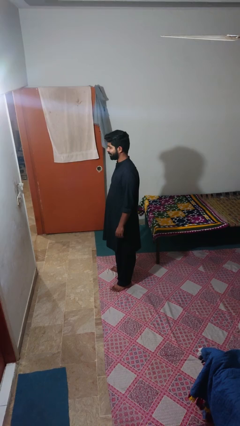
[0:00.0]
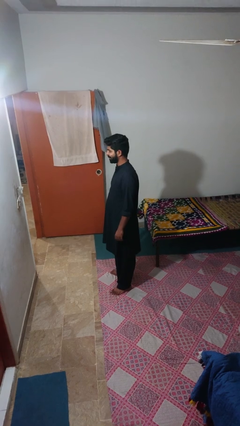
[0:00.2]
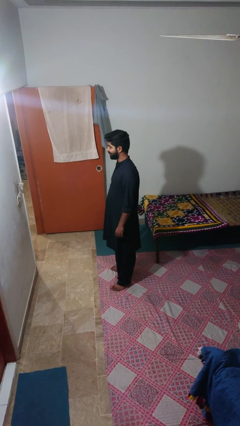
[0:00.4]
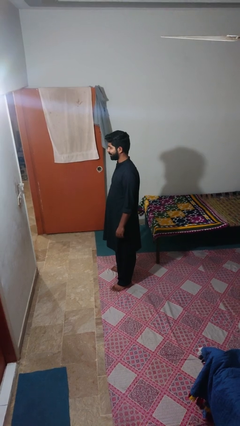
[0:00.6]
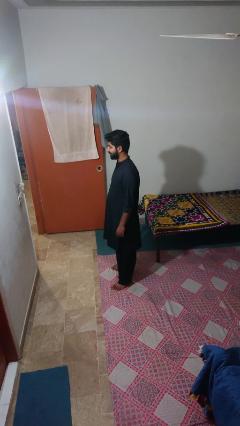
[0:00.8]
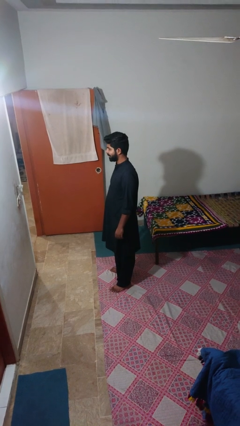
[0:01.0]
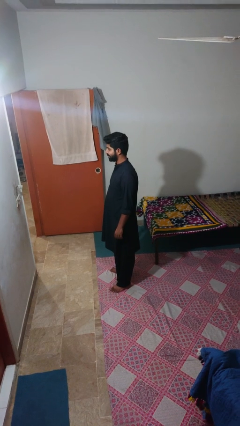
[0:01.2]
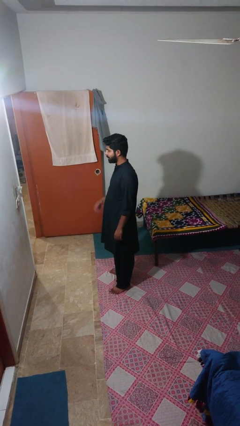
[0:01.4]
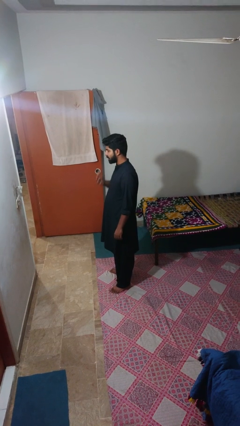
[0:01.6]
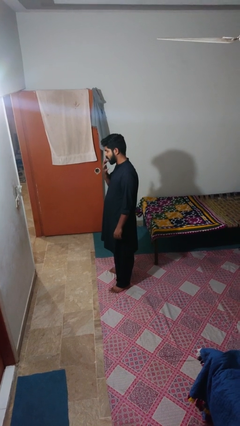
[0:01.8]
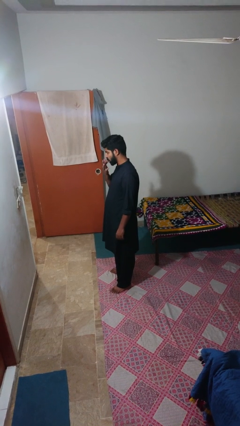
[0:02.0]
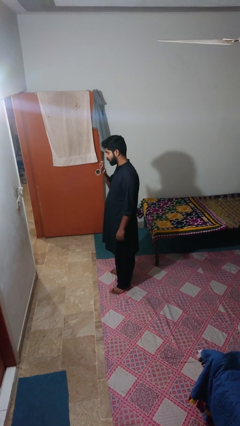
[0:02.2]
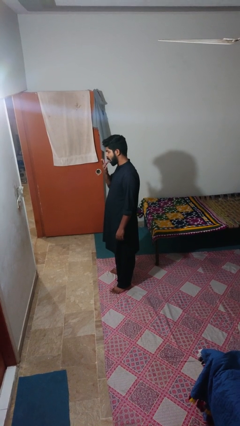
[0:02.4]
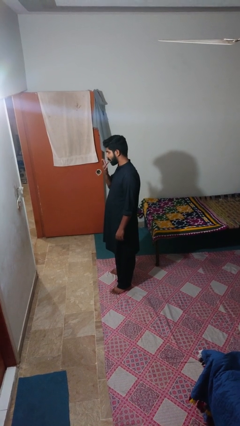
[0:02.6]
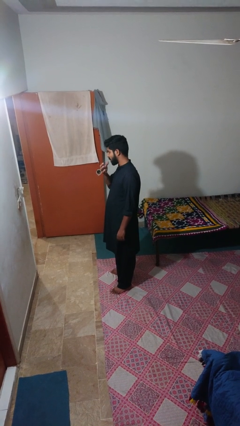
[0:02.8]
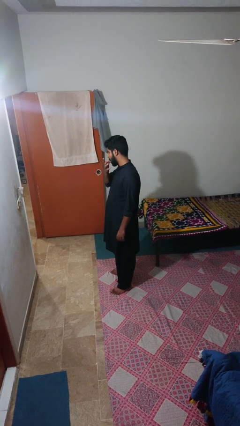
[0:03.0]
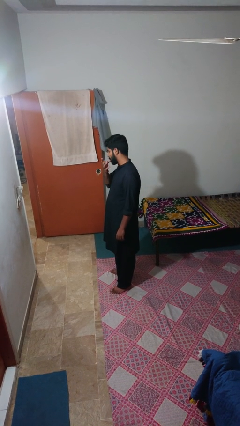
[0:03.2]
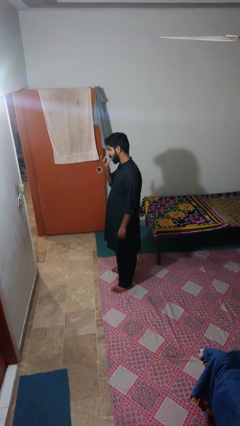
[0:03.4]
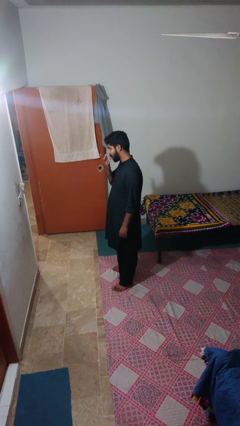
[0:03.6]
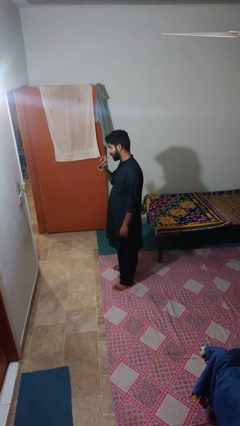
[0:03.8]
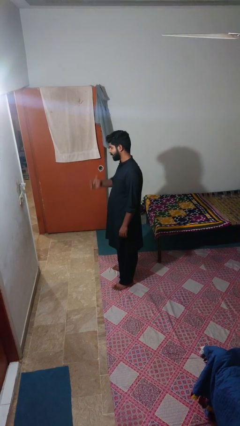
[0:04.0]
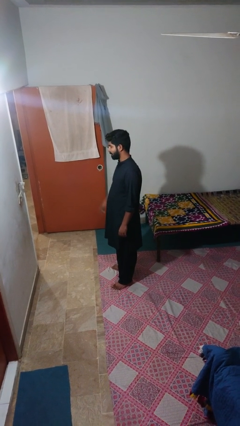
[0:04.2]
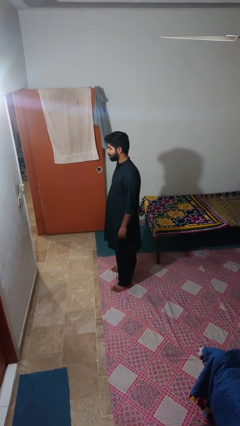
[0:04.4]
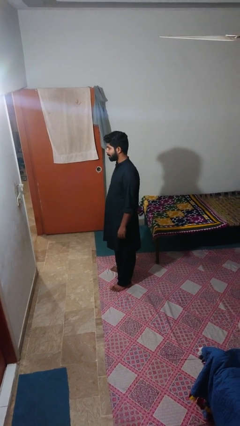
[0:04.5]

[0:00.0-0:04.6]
person licks fingers

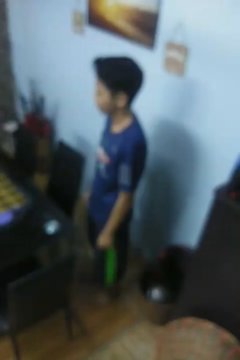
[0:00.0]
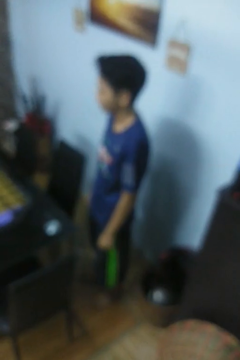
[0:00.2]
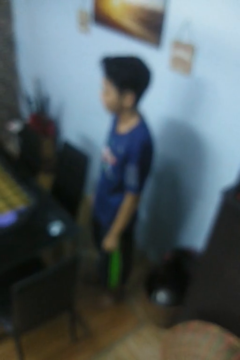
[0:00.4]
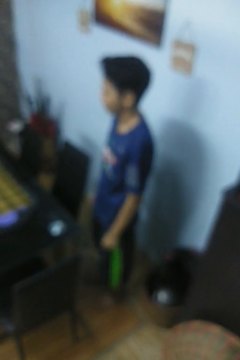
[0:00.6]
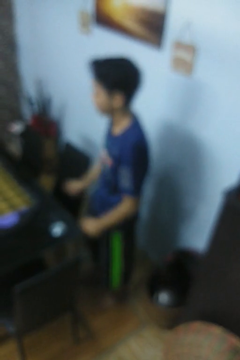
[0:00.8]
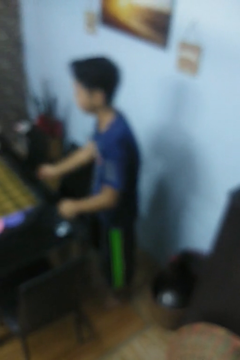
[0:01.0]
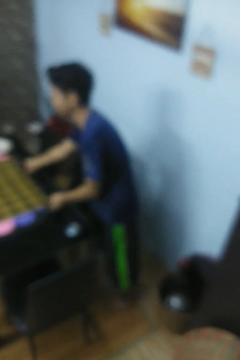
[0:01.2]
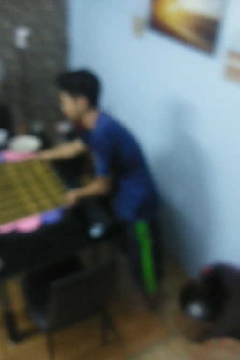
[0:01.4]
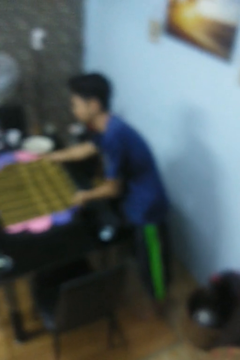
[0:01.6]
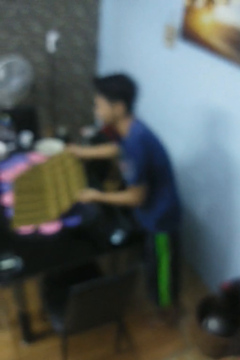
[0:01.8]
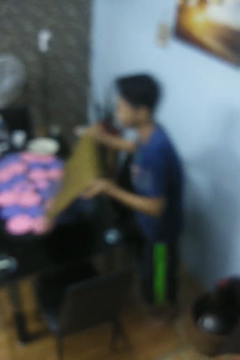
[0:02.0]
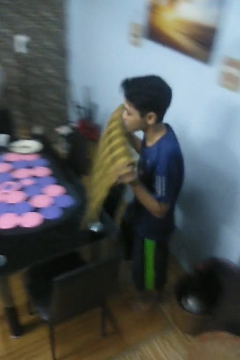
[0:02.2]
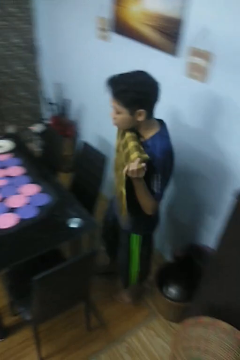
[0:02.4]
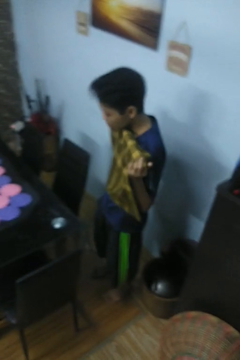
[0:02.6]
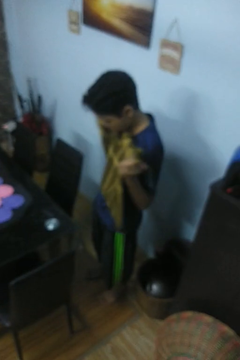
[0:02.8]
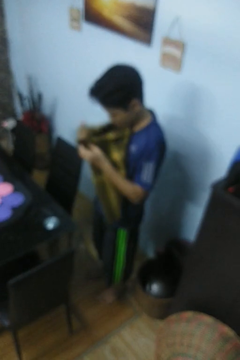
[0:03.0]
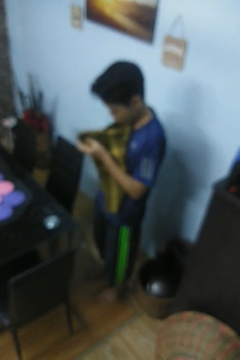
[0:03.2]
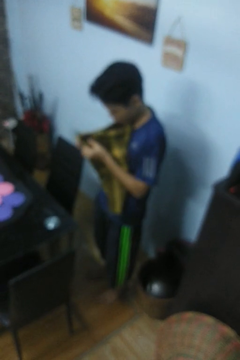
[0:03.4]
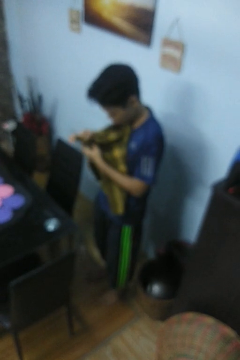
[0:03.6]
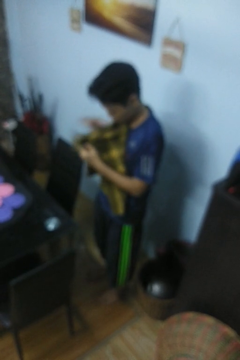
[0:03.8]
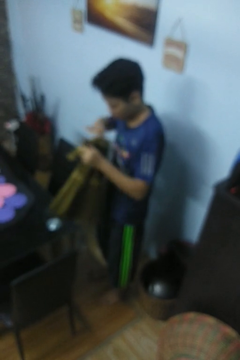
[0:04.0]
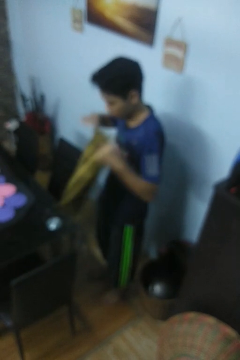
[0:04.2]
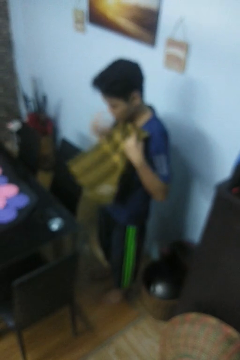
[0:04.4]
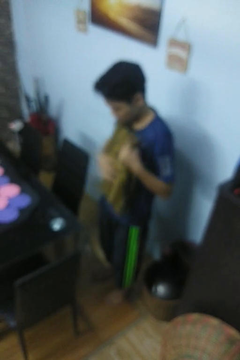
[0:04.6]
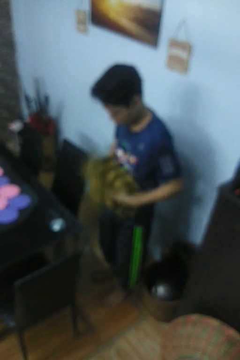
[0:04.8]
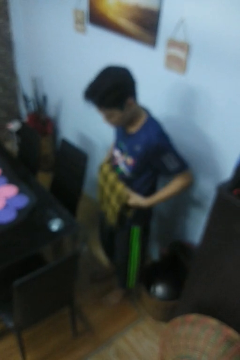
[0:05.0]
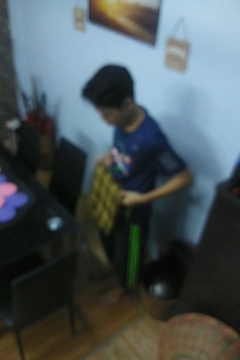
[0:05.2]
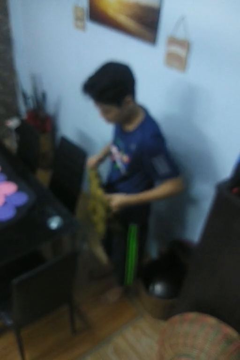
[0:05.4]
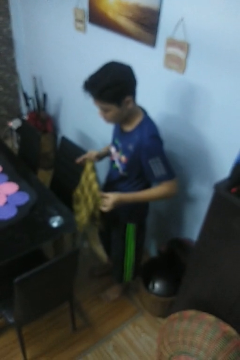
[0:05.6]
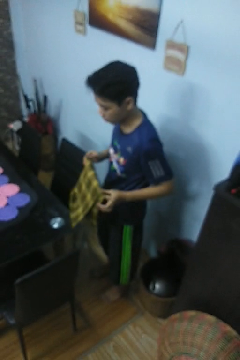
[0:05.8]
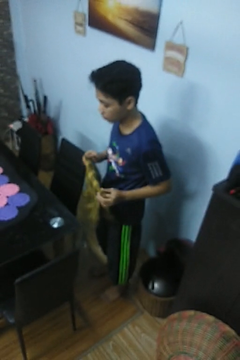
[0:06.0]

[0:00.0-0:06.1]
person folds tablecloth

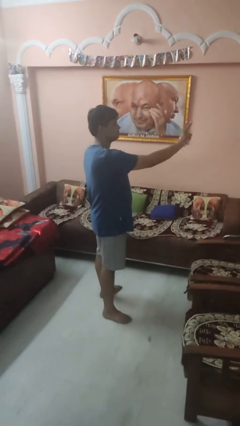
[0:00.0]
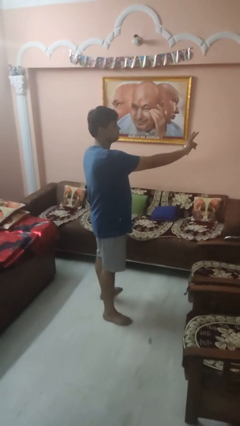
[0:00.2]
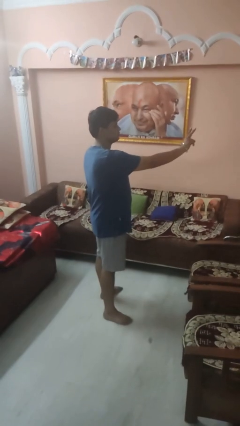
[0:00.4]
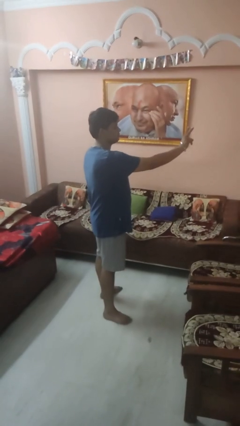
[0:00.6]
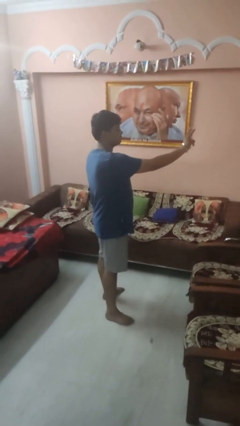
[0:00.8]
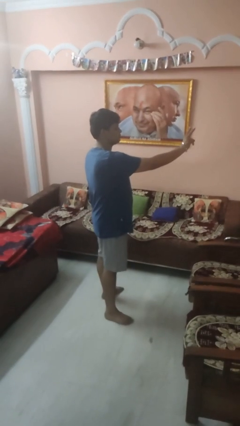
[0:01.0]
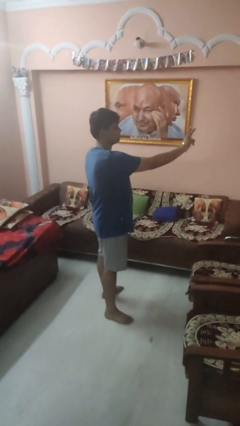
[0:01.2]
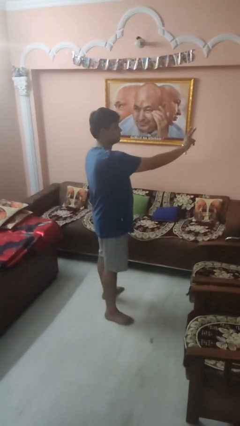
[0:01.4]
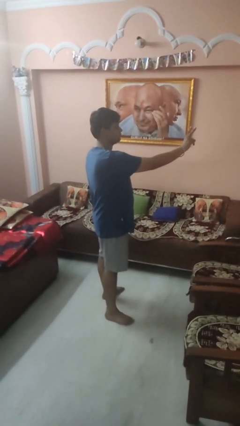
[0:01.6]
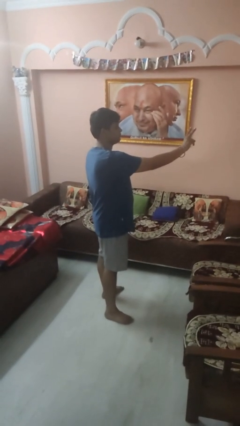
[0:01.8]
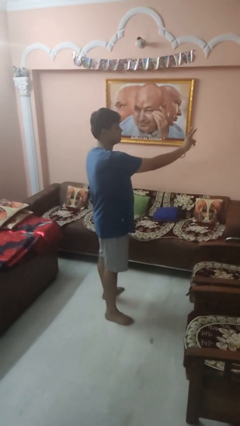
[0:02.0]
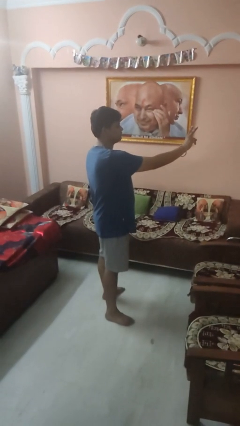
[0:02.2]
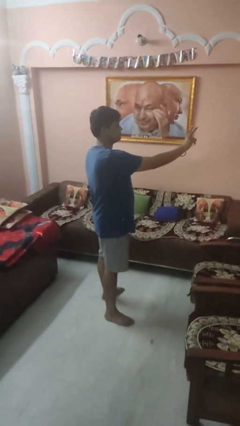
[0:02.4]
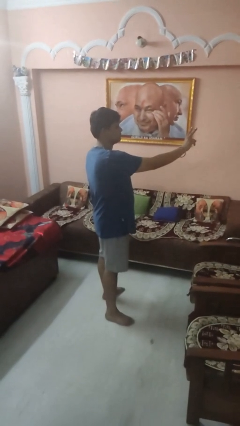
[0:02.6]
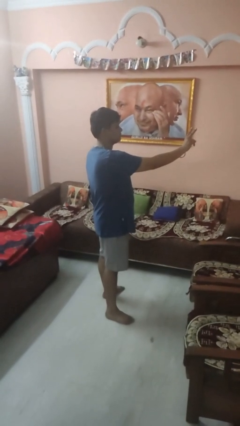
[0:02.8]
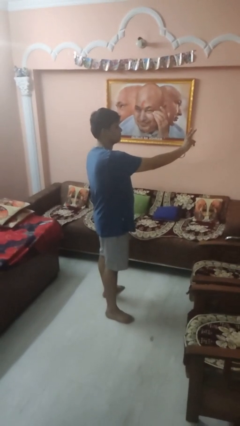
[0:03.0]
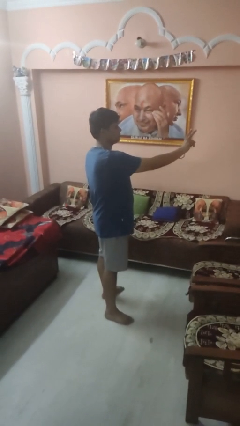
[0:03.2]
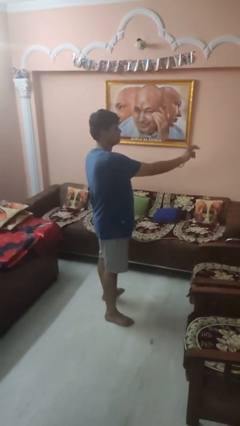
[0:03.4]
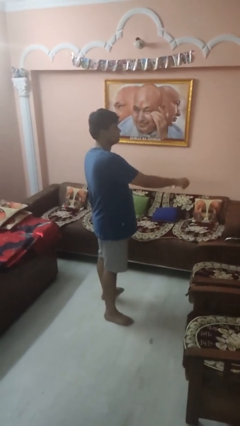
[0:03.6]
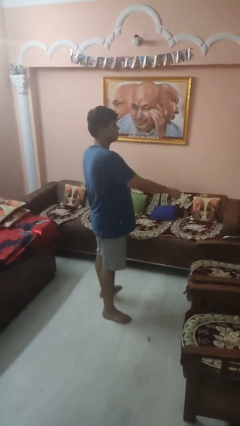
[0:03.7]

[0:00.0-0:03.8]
person gestures peace

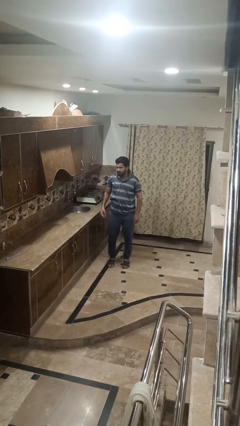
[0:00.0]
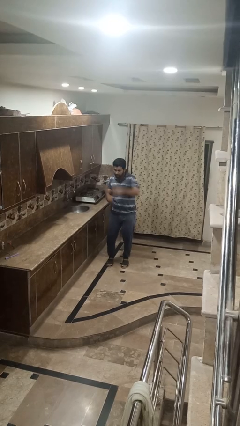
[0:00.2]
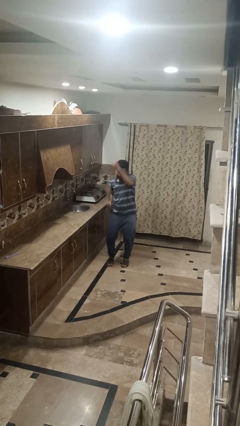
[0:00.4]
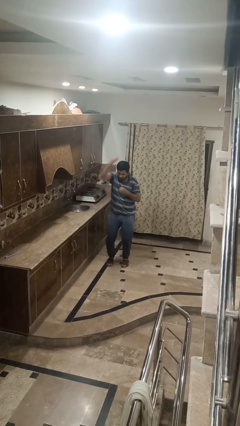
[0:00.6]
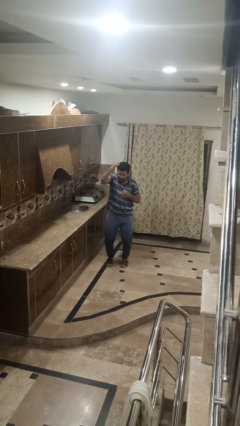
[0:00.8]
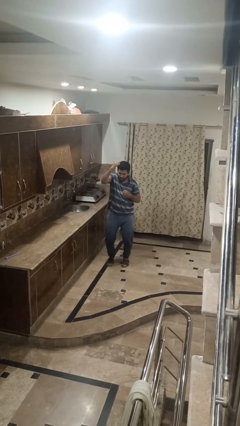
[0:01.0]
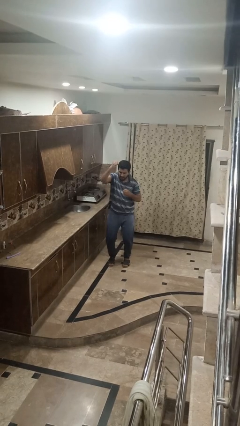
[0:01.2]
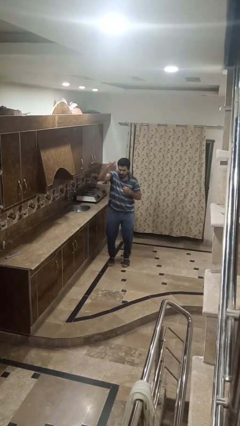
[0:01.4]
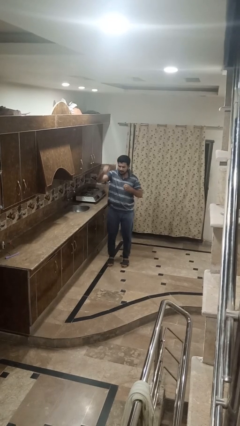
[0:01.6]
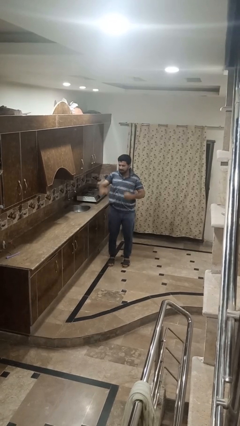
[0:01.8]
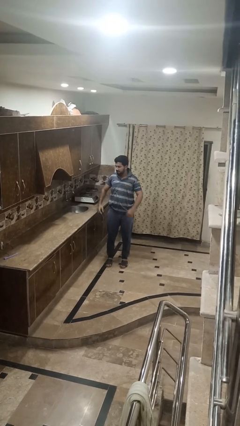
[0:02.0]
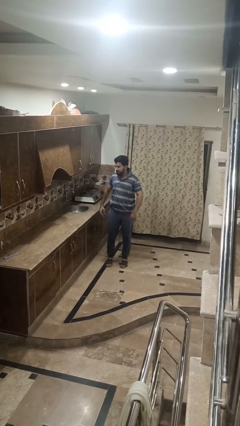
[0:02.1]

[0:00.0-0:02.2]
person punches

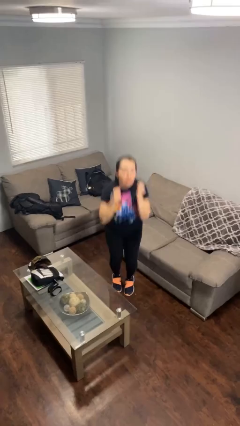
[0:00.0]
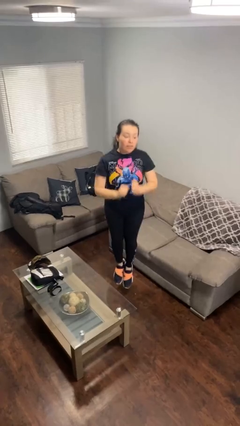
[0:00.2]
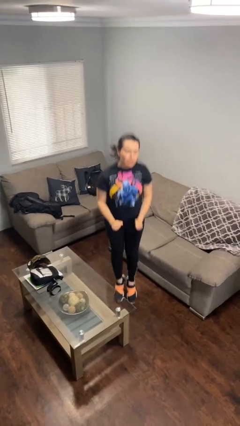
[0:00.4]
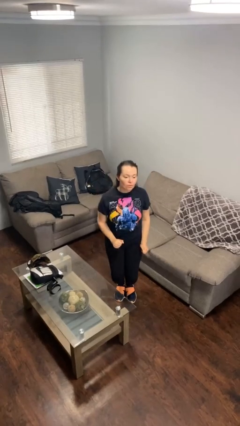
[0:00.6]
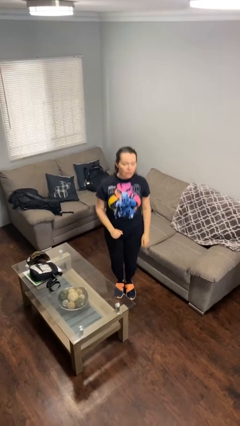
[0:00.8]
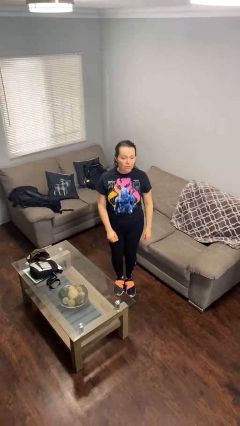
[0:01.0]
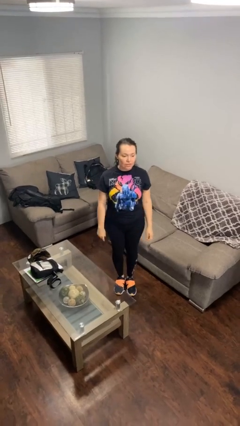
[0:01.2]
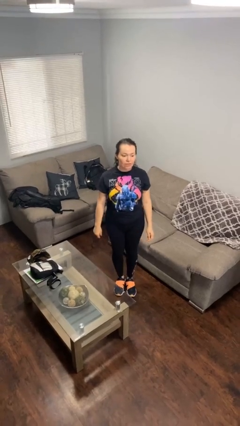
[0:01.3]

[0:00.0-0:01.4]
person jumps

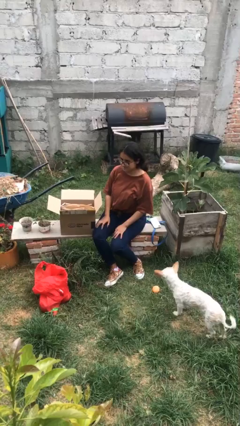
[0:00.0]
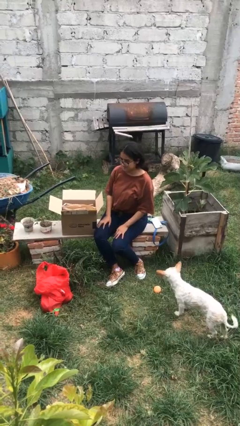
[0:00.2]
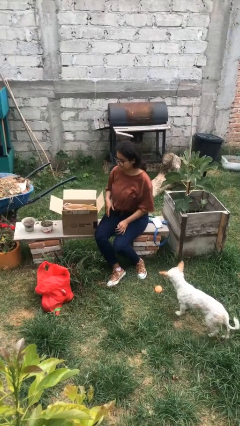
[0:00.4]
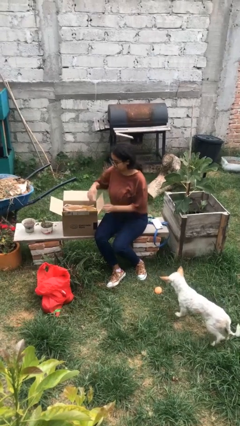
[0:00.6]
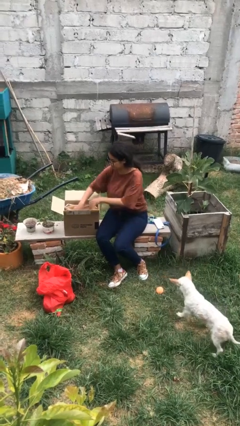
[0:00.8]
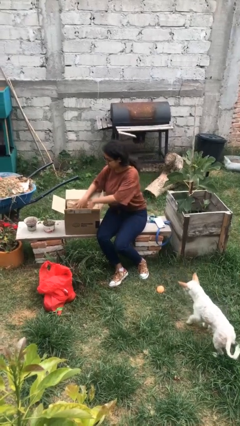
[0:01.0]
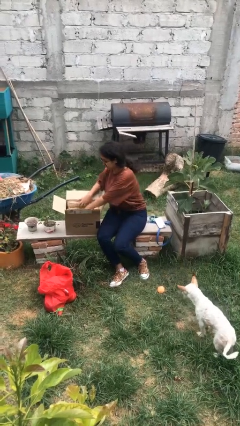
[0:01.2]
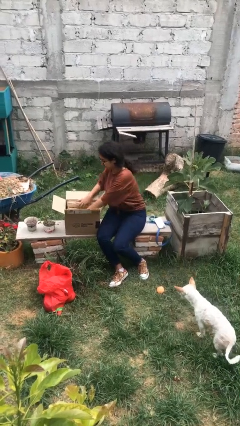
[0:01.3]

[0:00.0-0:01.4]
person searches in box
